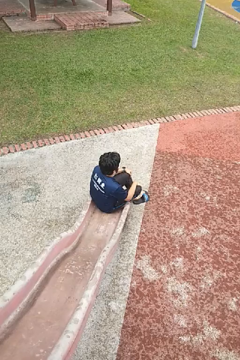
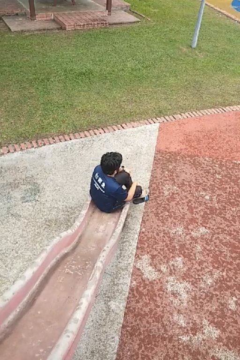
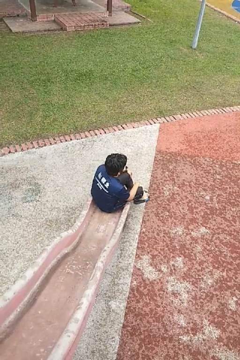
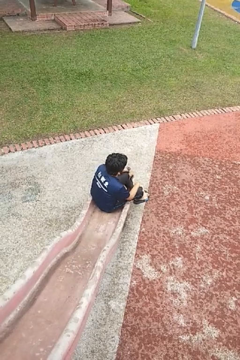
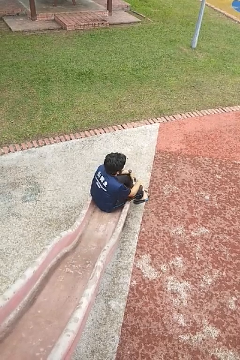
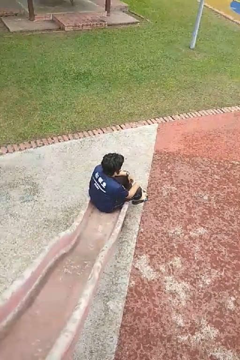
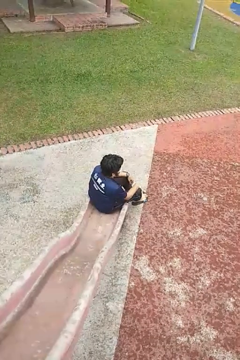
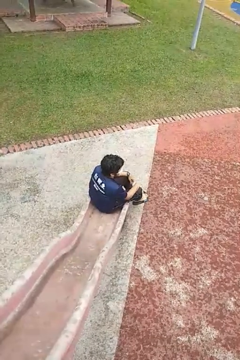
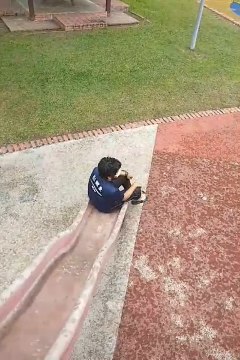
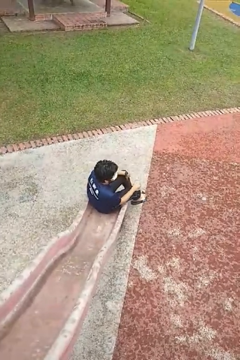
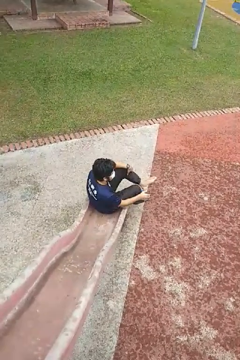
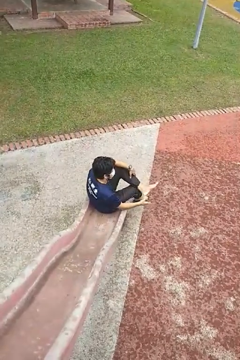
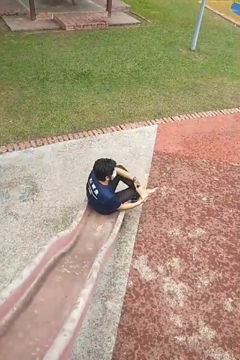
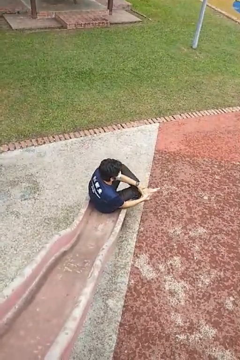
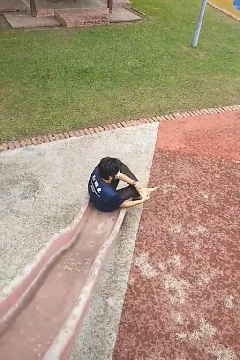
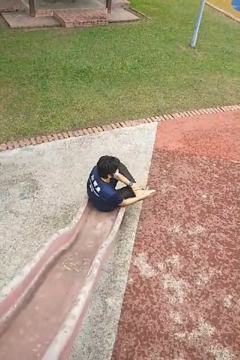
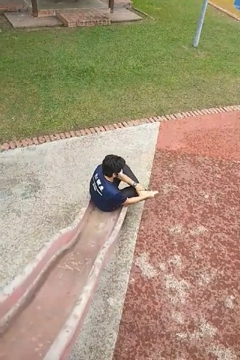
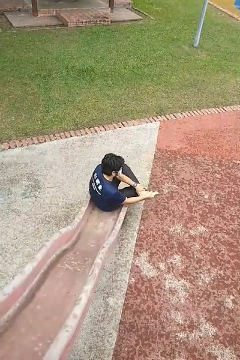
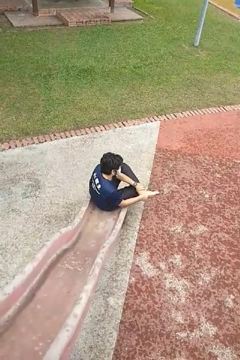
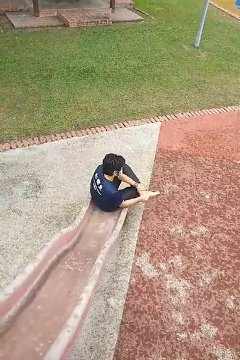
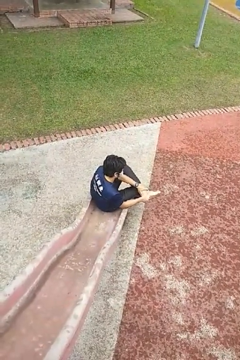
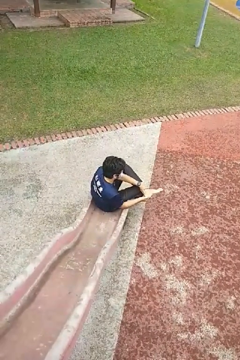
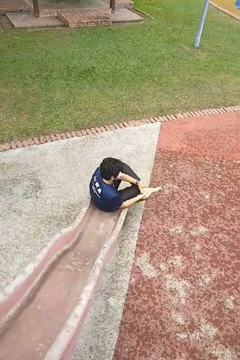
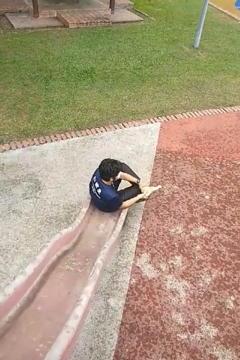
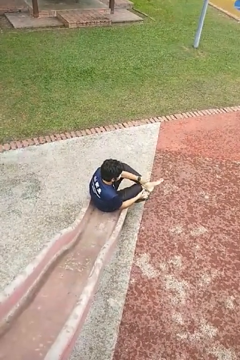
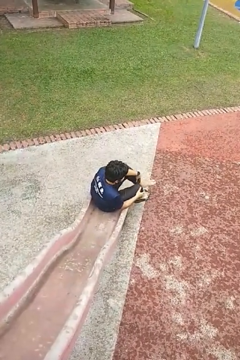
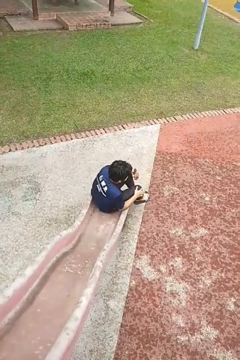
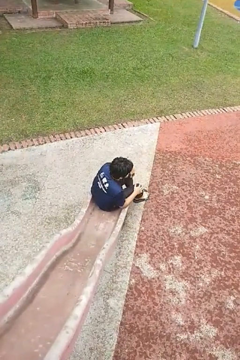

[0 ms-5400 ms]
person rubs foot

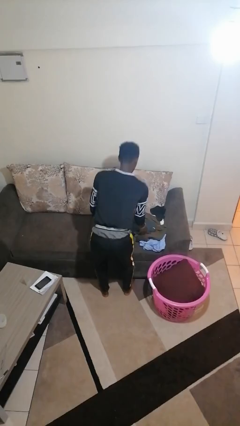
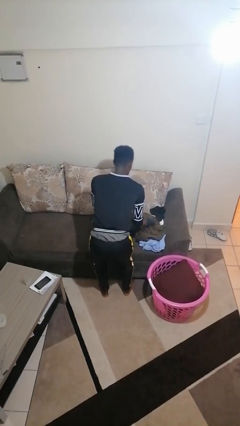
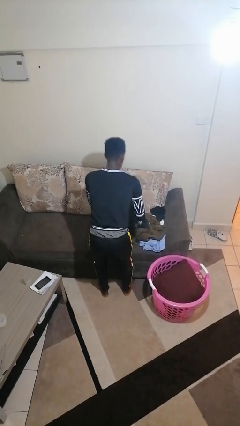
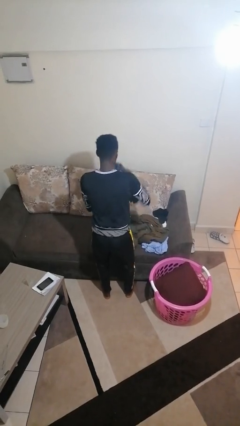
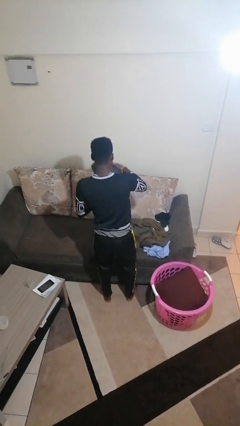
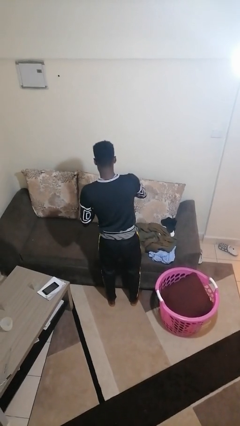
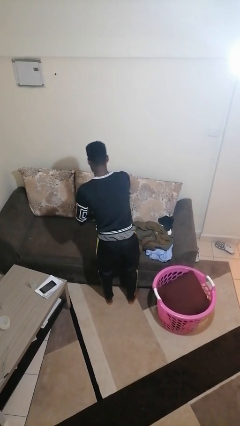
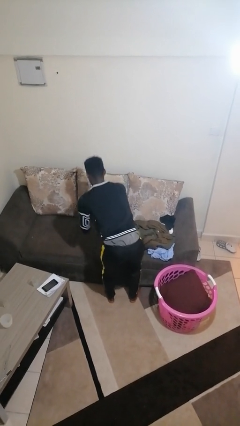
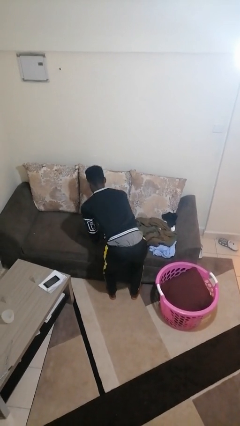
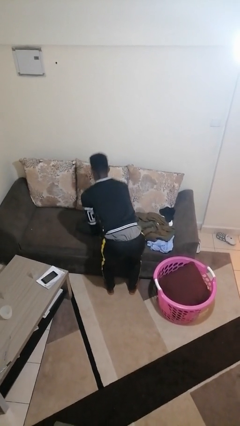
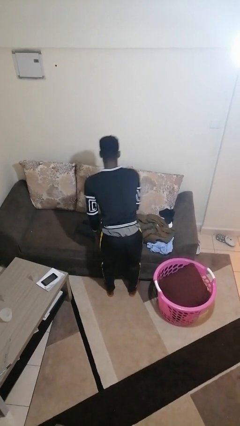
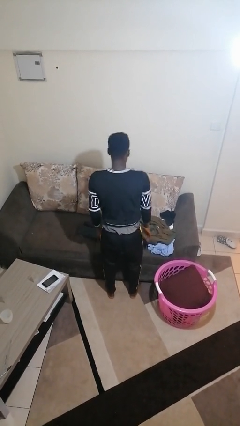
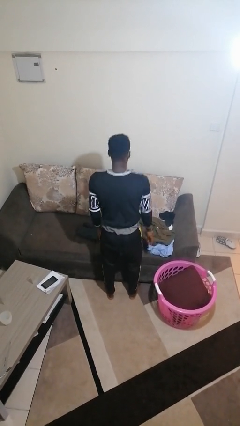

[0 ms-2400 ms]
person folds pants

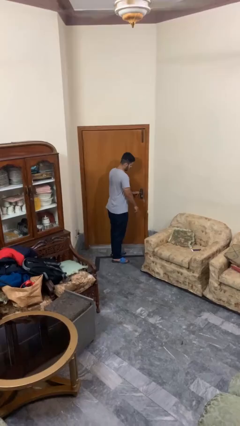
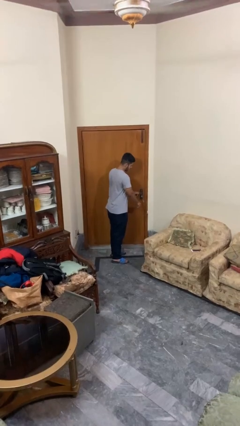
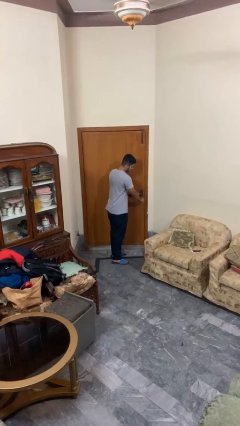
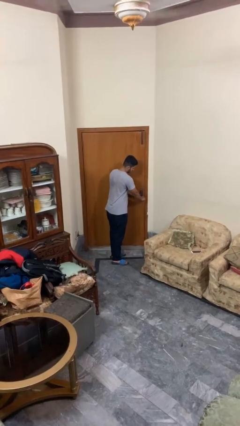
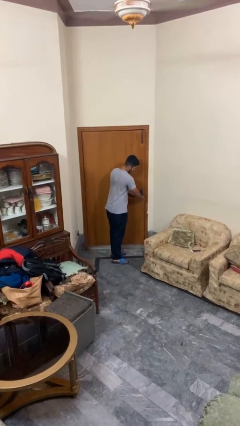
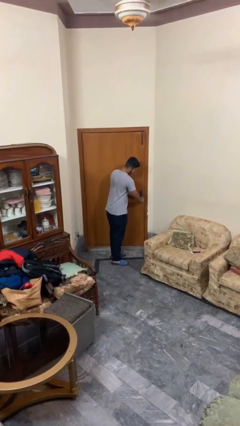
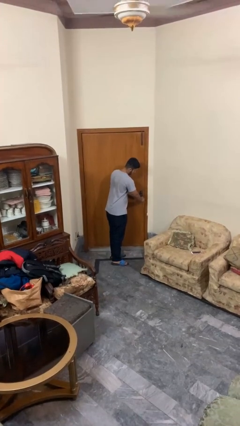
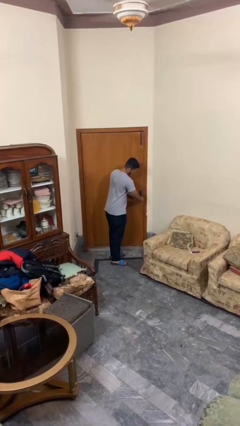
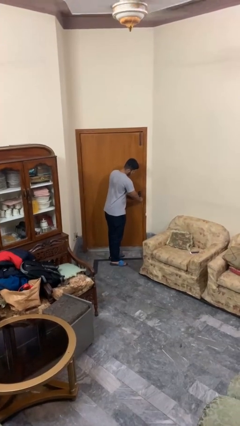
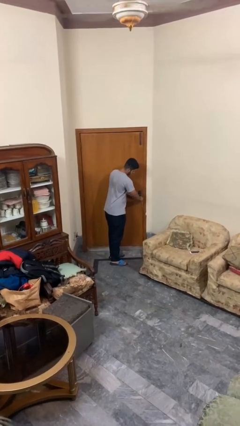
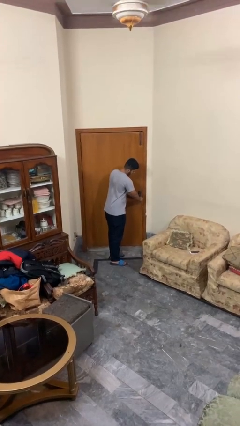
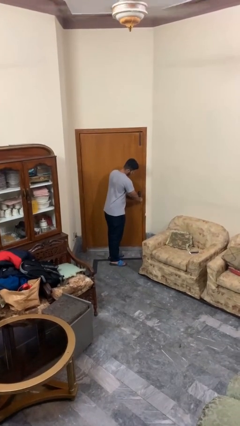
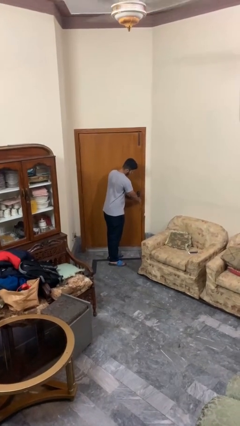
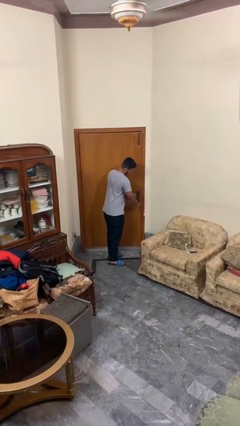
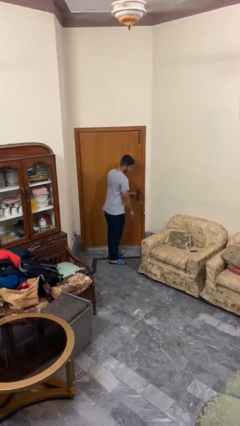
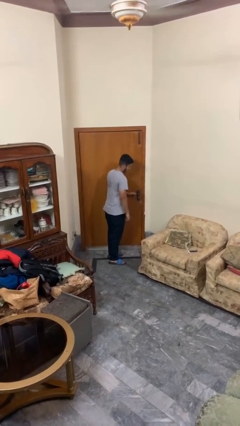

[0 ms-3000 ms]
person locks door with keys

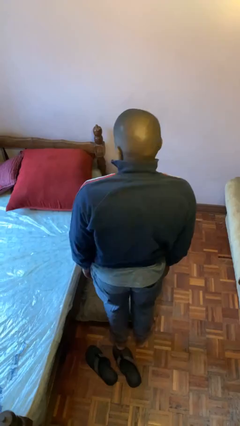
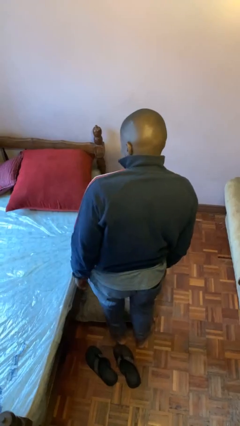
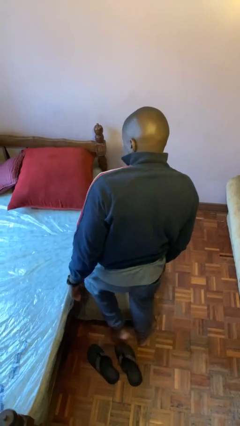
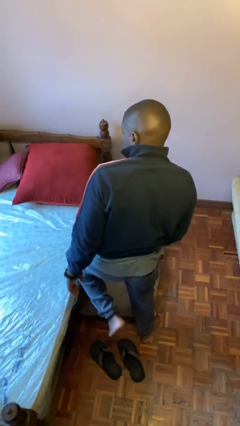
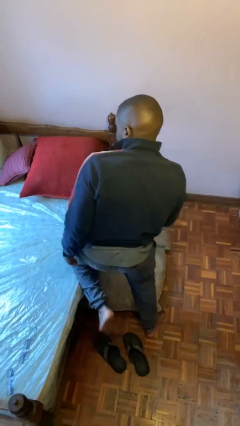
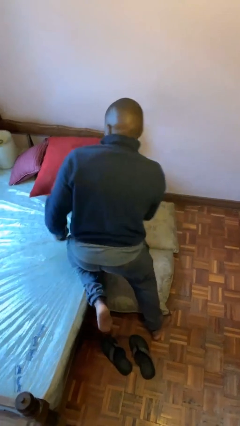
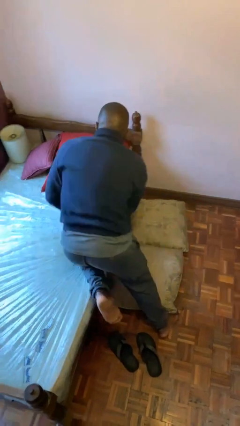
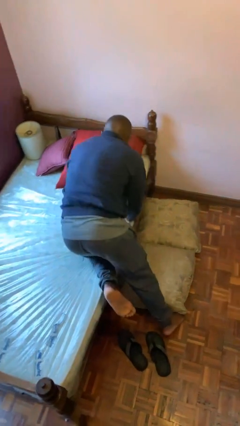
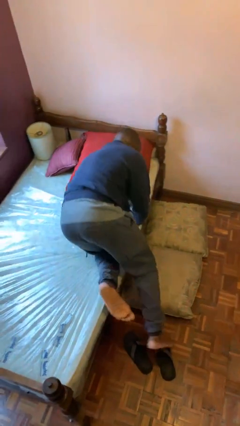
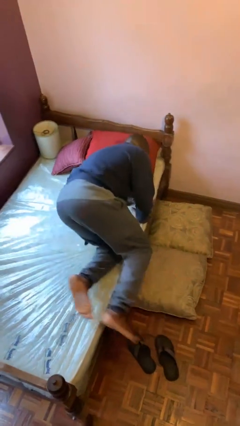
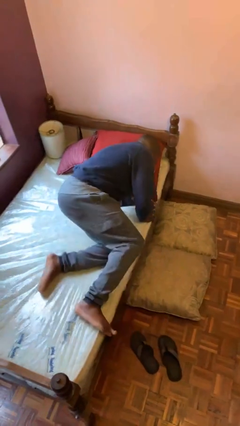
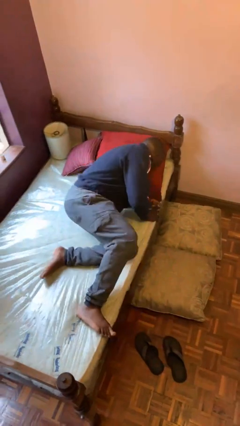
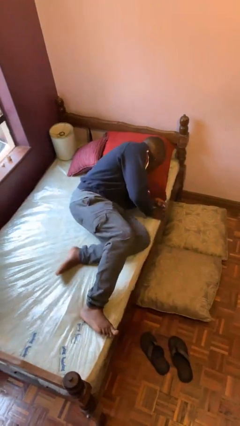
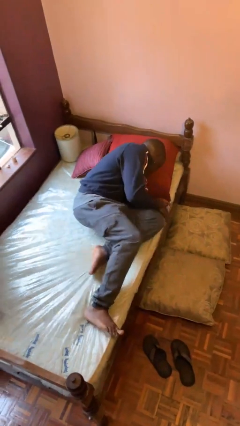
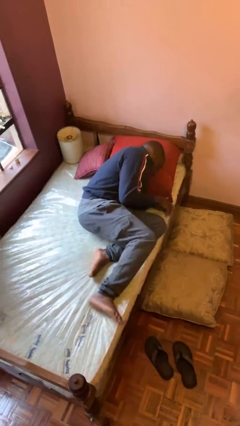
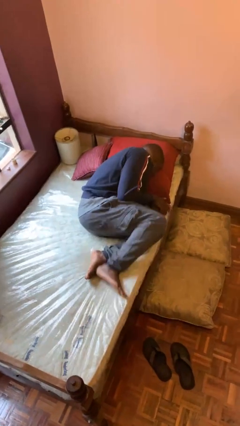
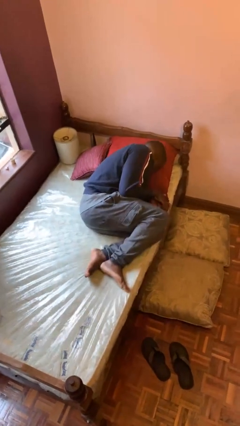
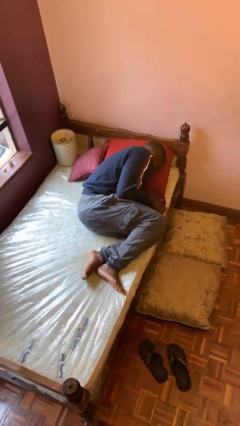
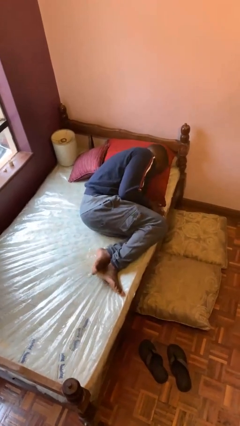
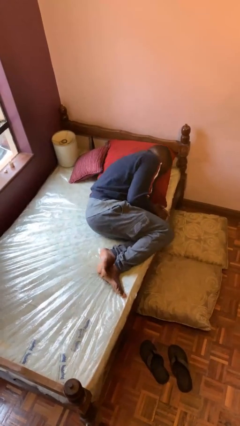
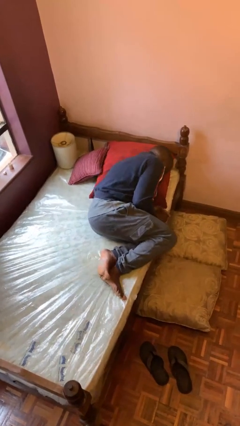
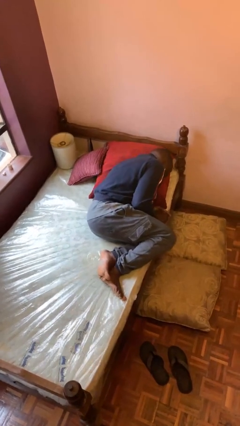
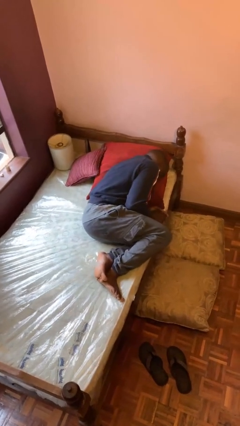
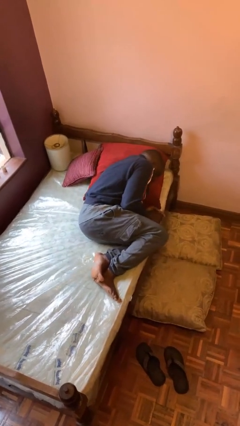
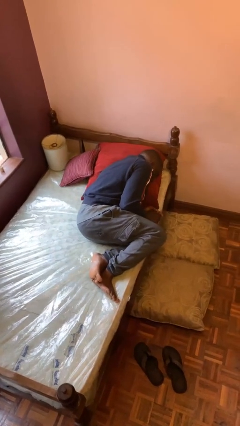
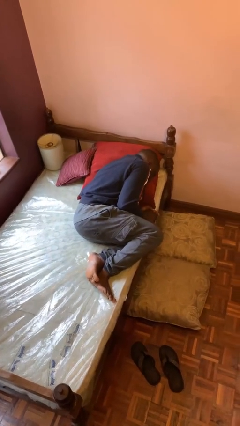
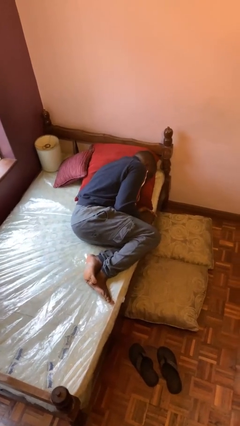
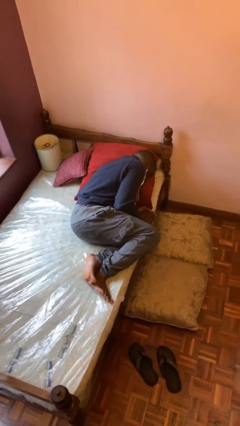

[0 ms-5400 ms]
person lies down on bed

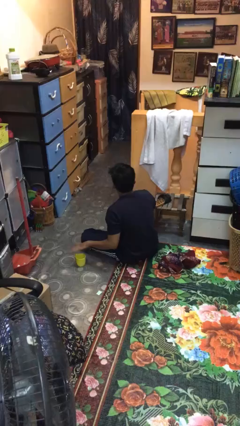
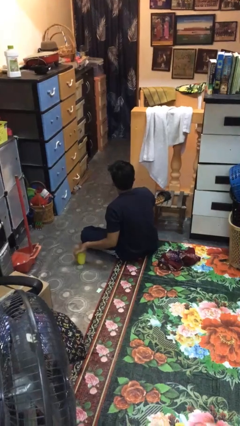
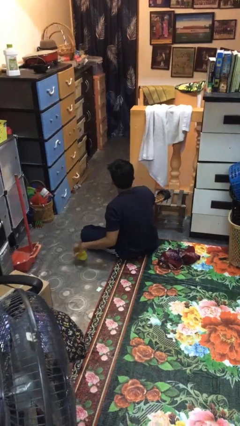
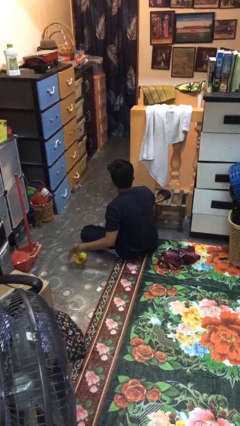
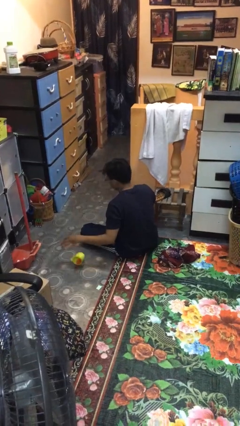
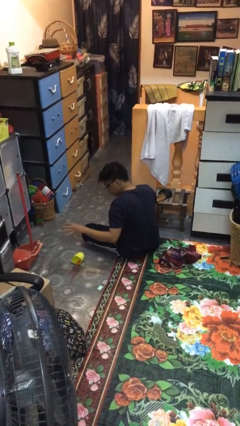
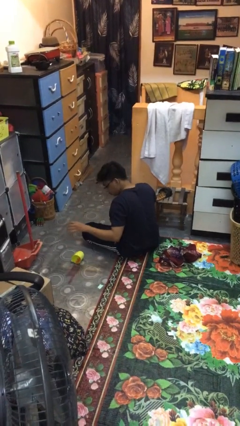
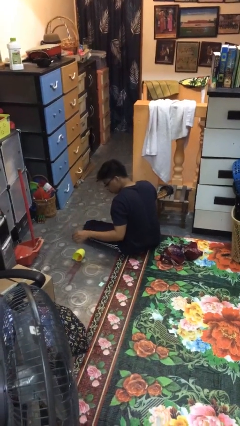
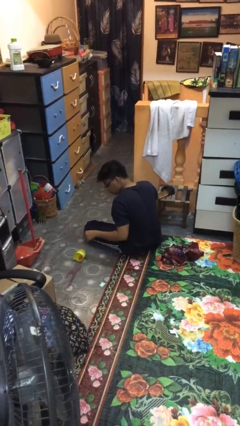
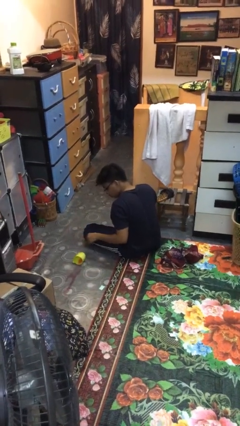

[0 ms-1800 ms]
person spills on floor

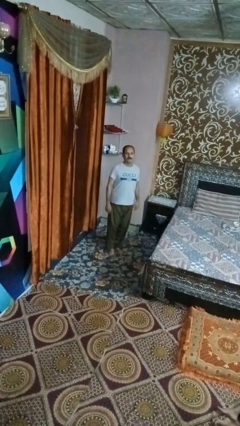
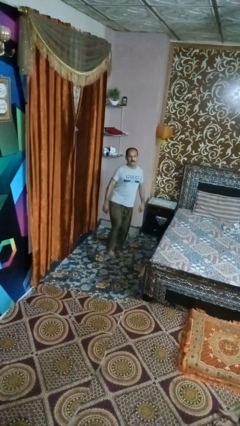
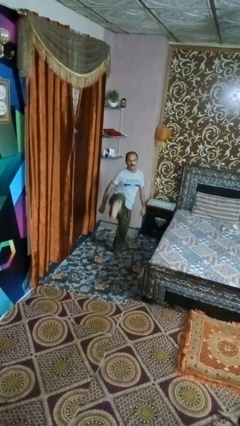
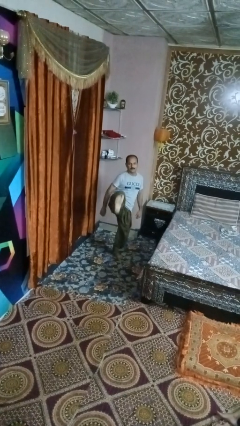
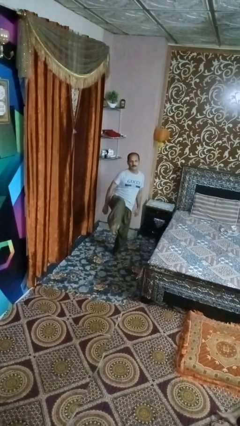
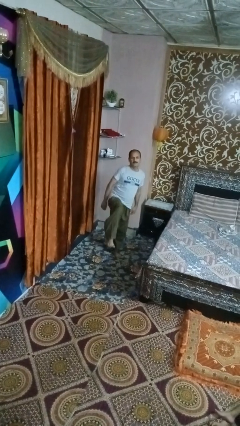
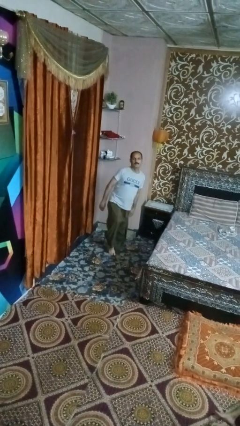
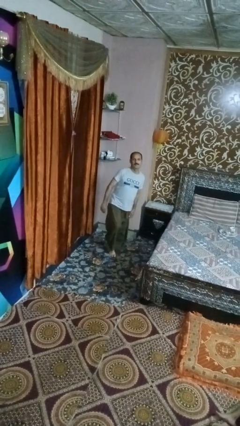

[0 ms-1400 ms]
person karate kicks
